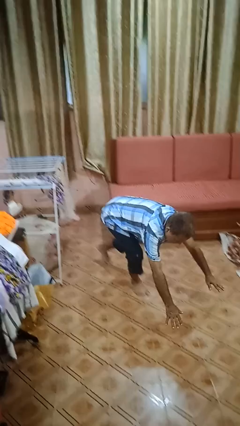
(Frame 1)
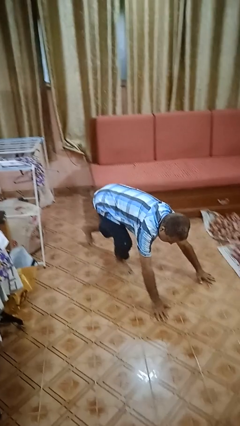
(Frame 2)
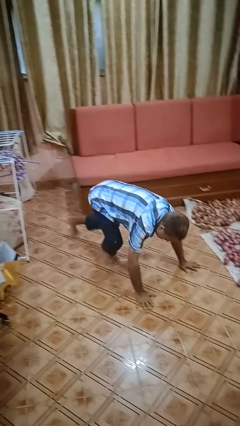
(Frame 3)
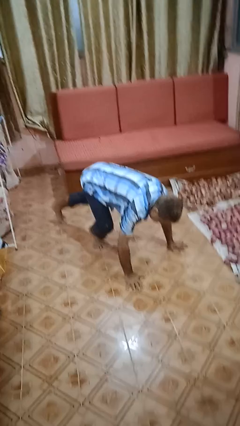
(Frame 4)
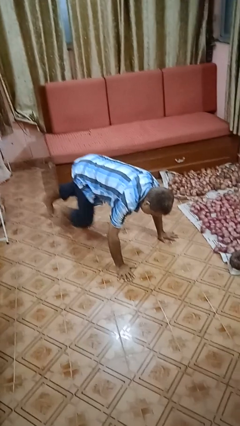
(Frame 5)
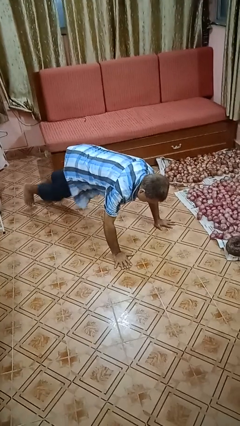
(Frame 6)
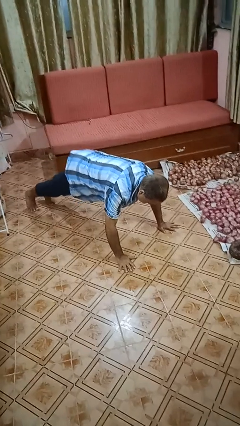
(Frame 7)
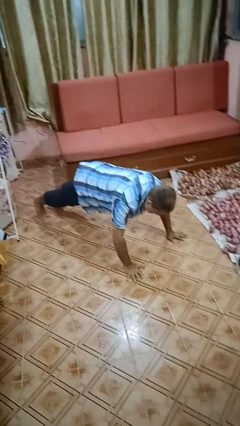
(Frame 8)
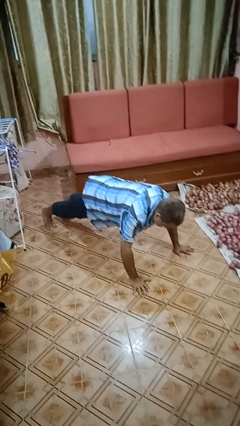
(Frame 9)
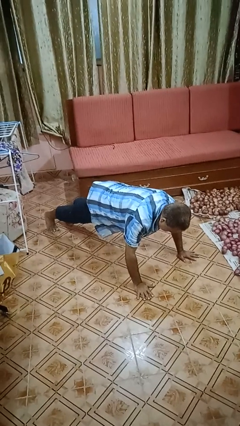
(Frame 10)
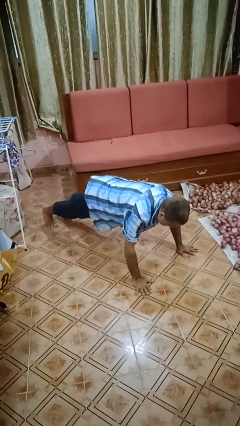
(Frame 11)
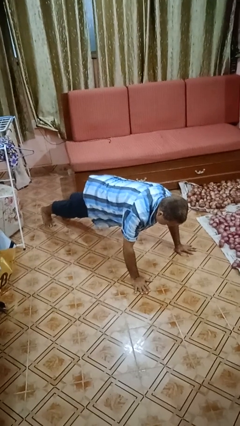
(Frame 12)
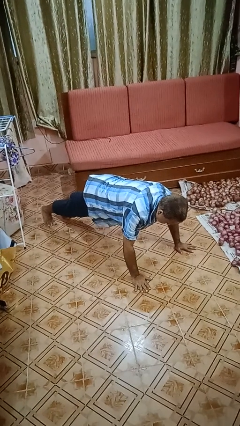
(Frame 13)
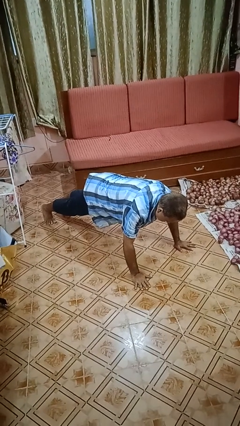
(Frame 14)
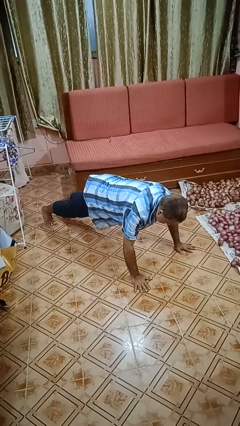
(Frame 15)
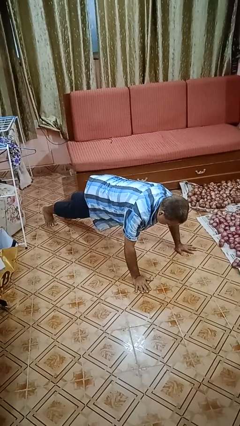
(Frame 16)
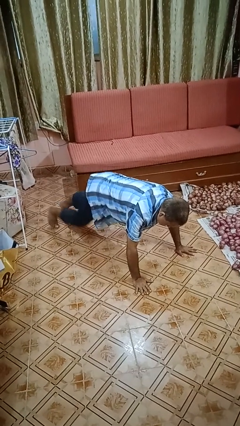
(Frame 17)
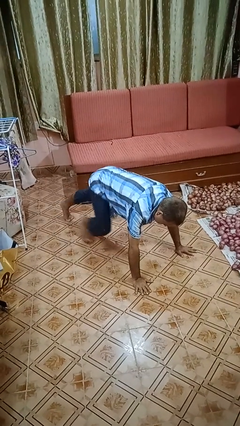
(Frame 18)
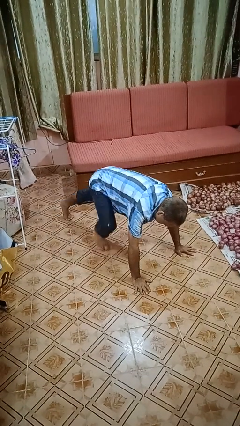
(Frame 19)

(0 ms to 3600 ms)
person exercises with plank

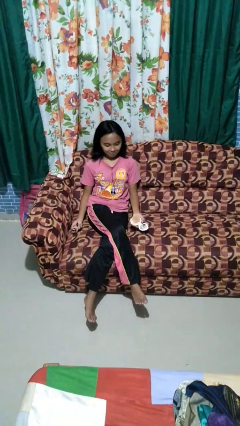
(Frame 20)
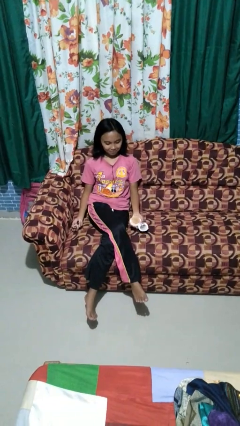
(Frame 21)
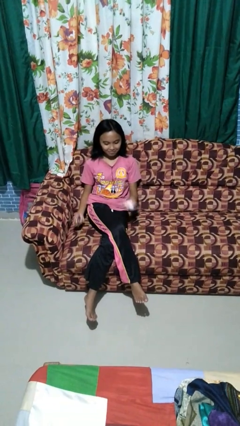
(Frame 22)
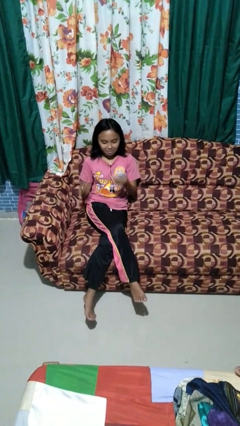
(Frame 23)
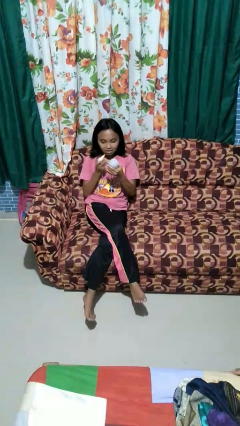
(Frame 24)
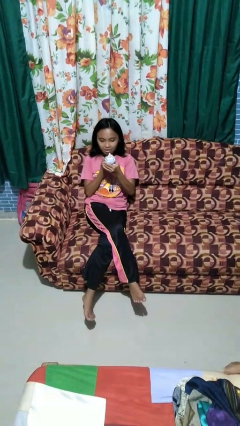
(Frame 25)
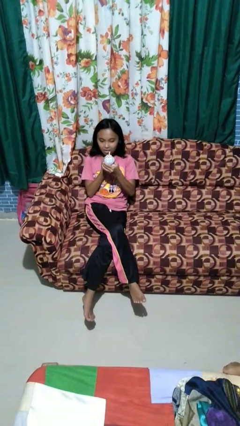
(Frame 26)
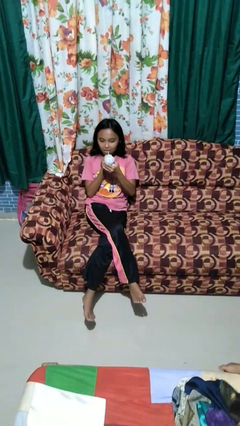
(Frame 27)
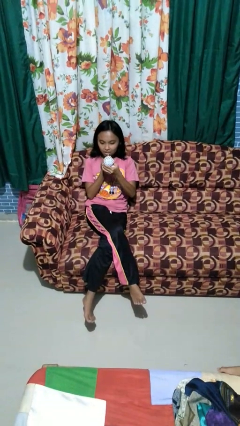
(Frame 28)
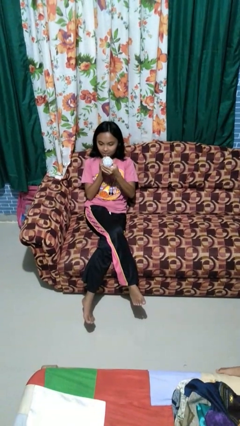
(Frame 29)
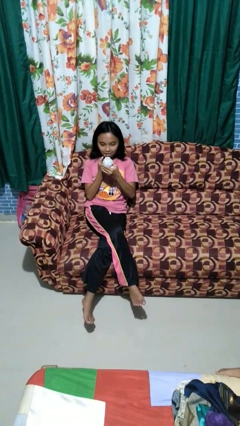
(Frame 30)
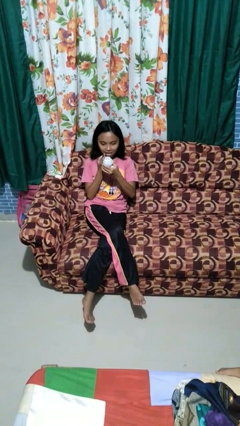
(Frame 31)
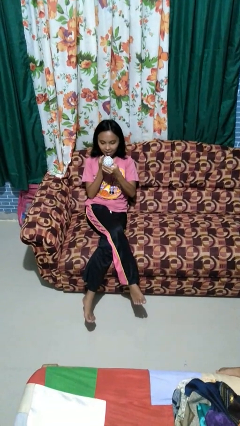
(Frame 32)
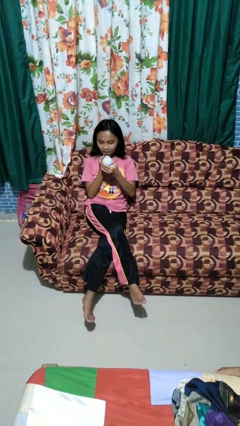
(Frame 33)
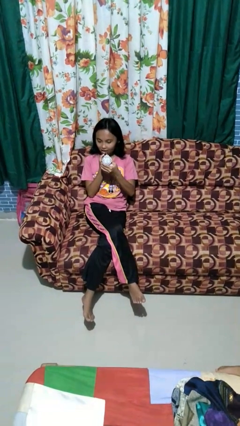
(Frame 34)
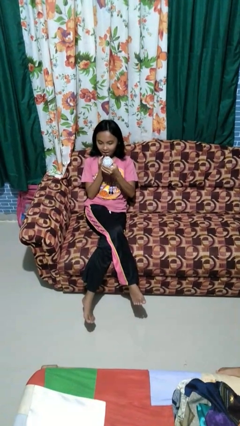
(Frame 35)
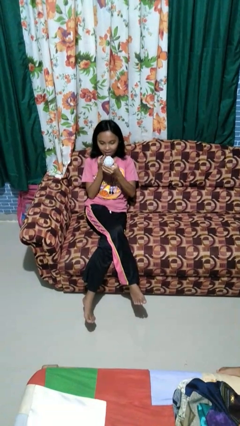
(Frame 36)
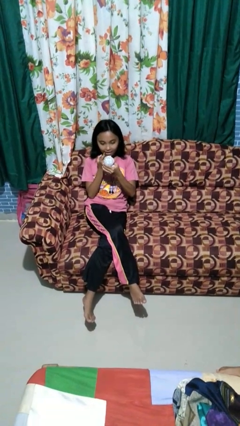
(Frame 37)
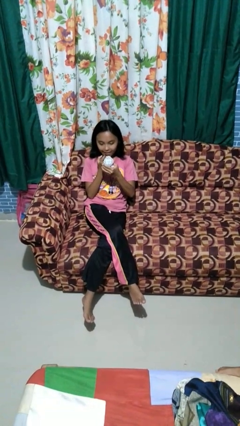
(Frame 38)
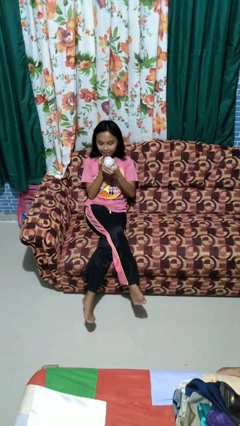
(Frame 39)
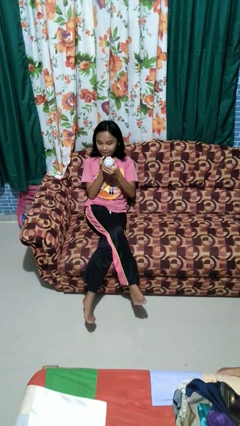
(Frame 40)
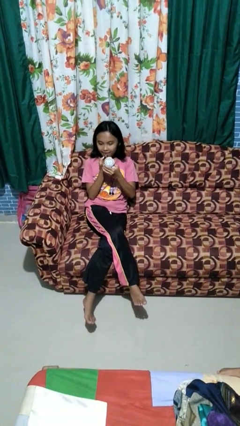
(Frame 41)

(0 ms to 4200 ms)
person applies lip makeup

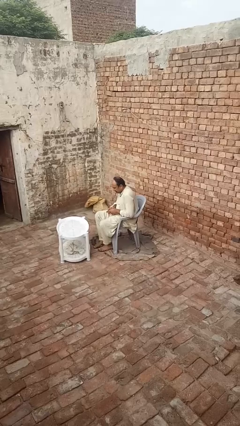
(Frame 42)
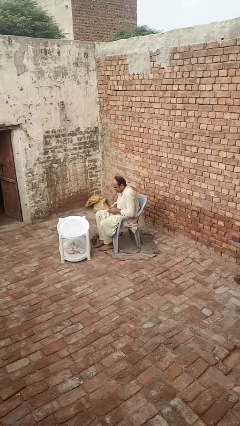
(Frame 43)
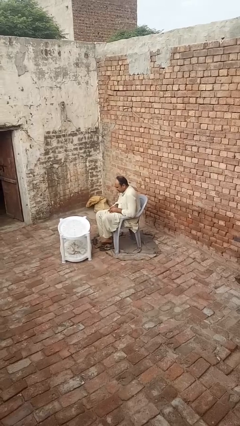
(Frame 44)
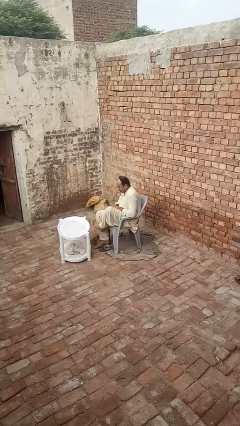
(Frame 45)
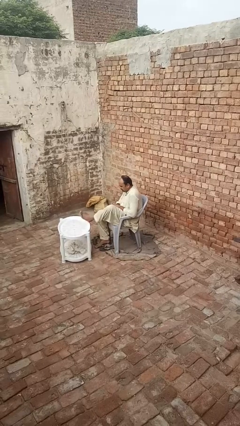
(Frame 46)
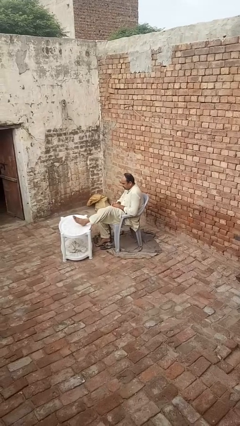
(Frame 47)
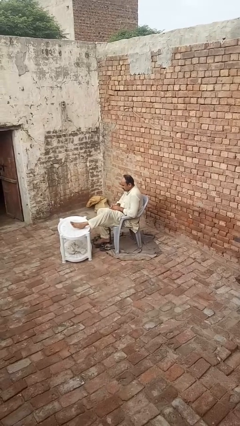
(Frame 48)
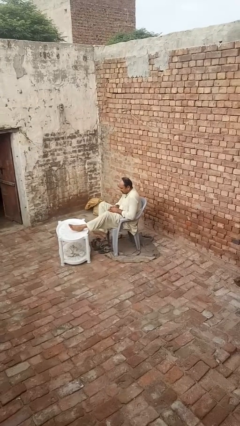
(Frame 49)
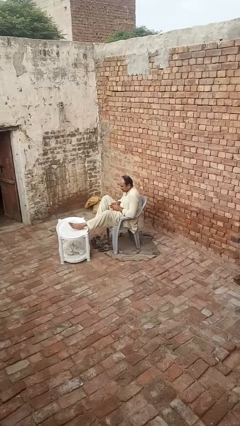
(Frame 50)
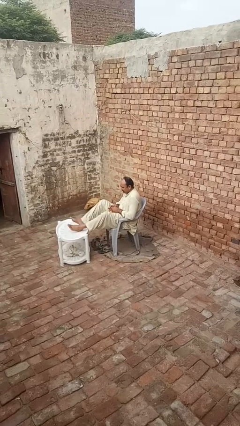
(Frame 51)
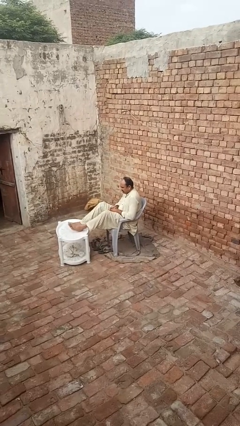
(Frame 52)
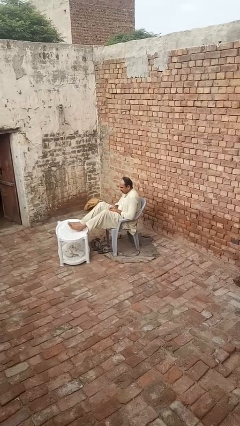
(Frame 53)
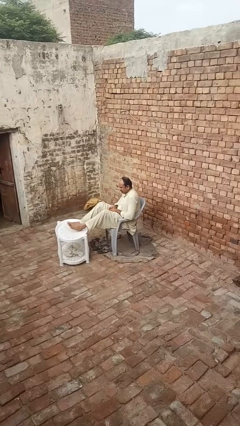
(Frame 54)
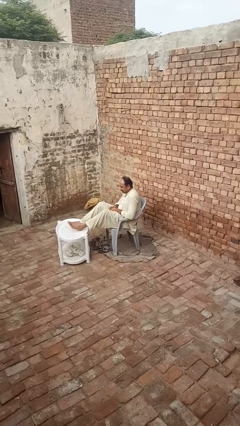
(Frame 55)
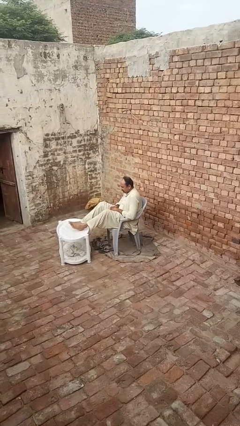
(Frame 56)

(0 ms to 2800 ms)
person puts feet up

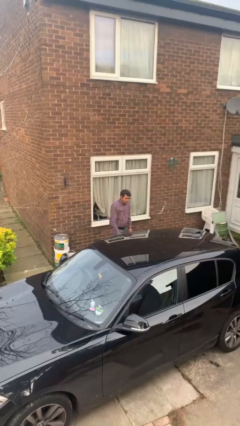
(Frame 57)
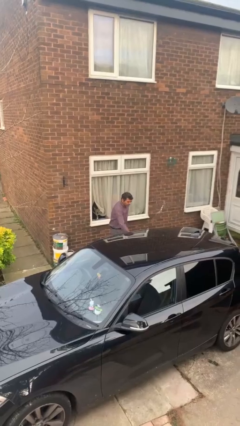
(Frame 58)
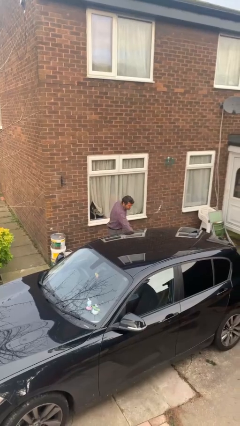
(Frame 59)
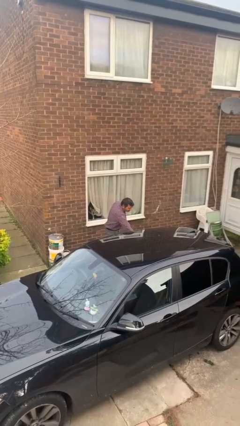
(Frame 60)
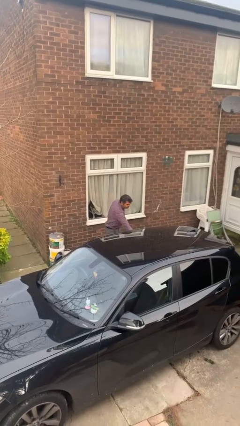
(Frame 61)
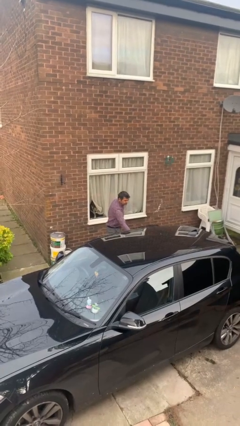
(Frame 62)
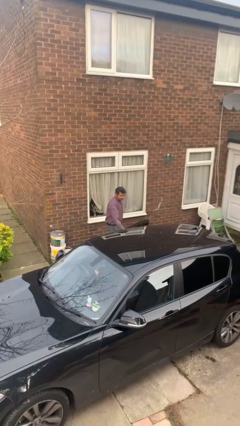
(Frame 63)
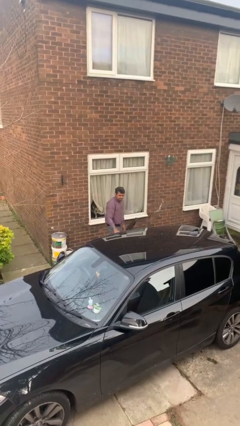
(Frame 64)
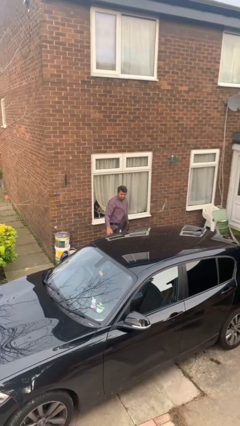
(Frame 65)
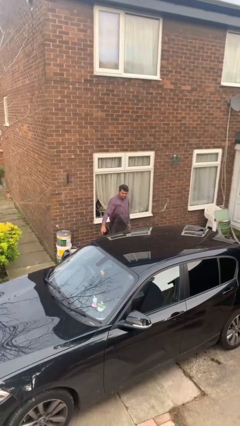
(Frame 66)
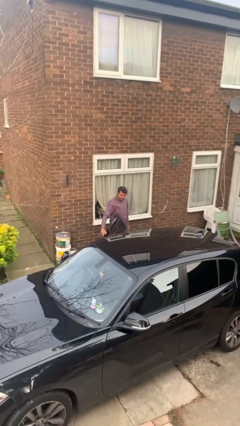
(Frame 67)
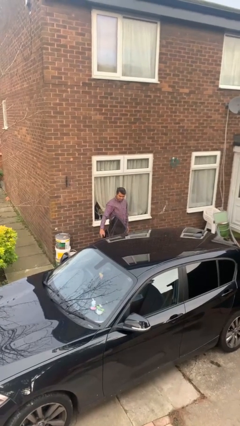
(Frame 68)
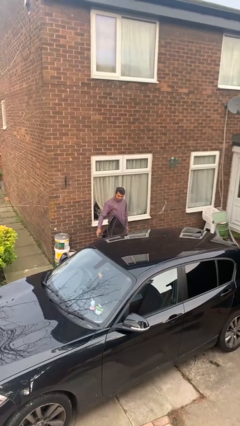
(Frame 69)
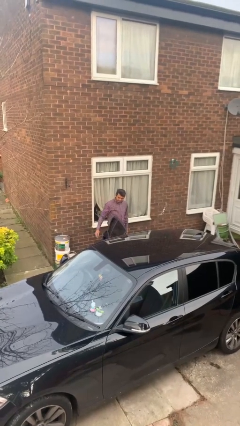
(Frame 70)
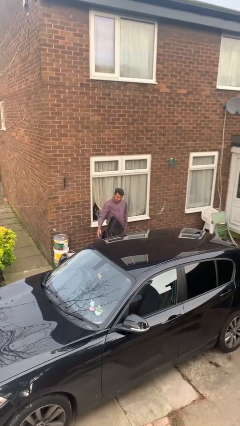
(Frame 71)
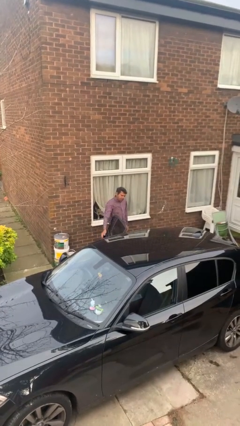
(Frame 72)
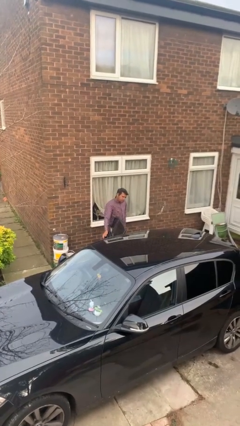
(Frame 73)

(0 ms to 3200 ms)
person opens car door

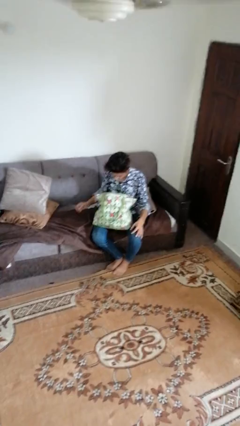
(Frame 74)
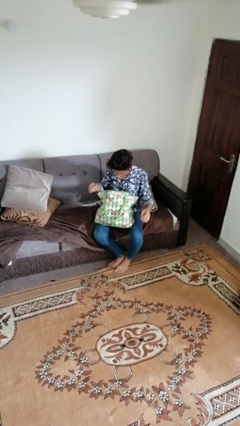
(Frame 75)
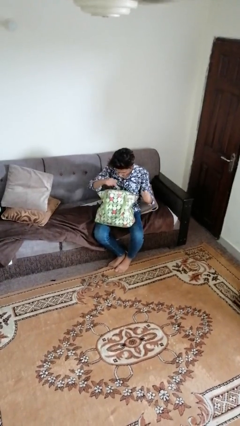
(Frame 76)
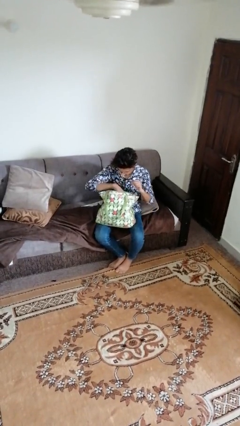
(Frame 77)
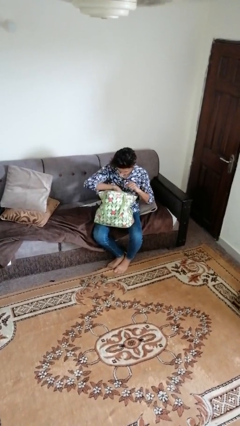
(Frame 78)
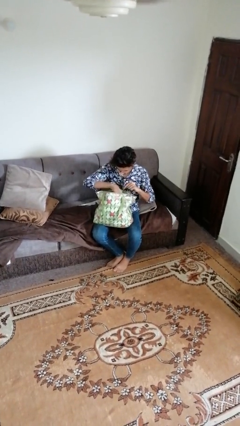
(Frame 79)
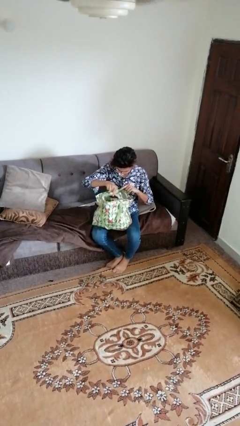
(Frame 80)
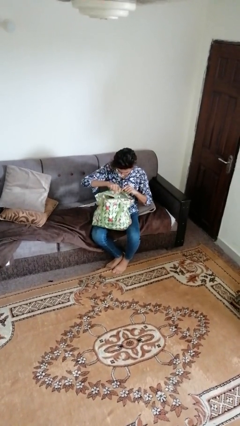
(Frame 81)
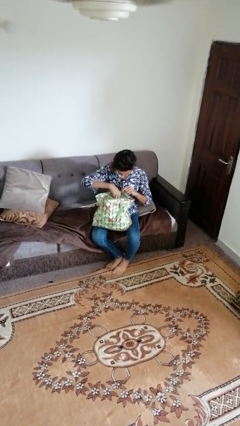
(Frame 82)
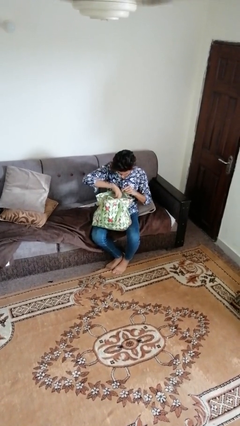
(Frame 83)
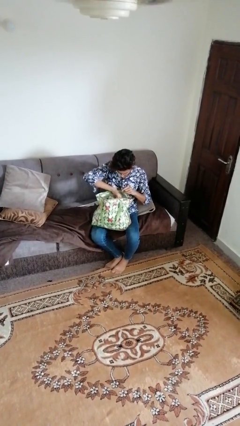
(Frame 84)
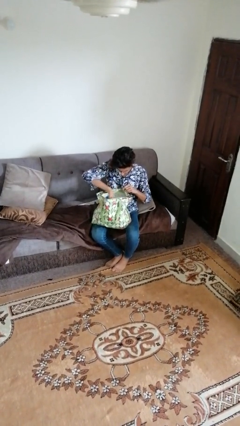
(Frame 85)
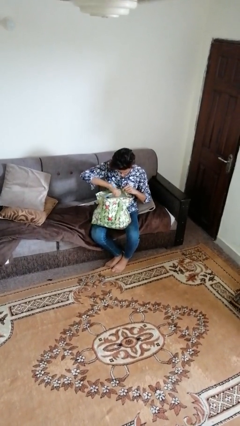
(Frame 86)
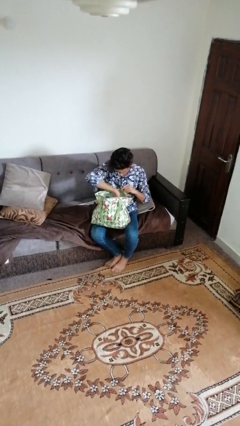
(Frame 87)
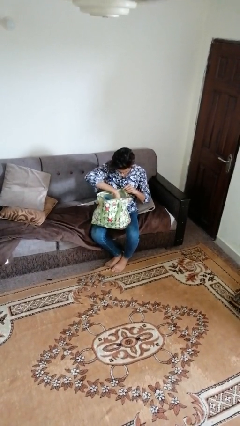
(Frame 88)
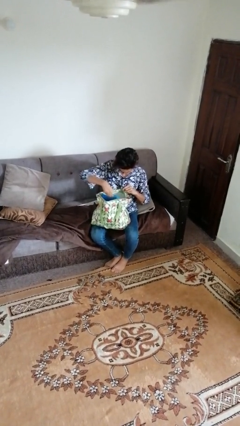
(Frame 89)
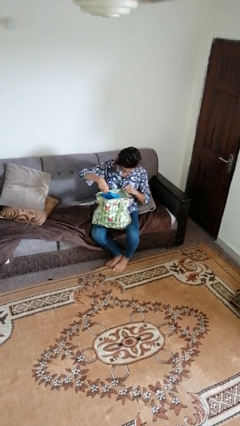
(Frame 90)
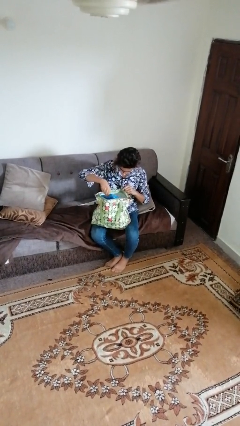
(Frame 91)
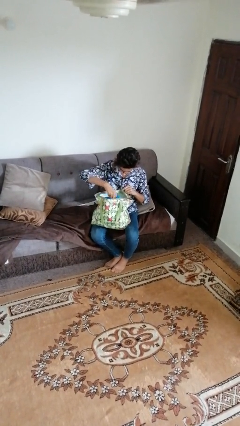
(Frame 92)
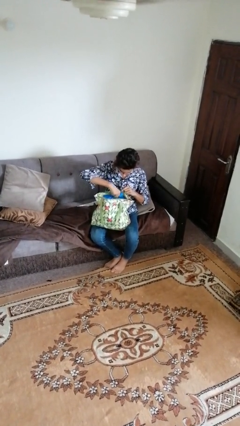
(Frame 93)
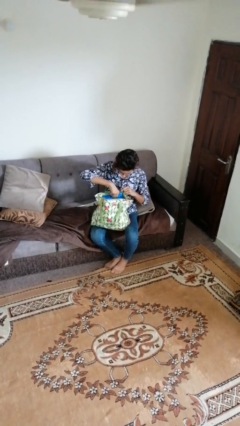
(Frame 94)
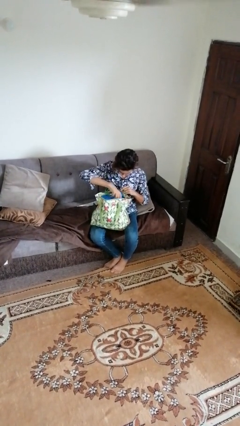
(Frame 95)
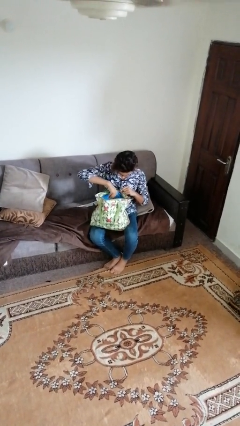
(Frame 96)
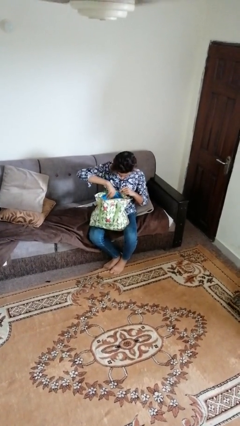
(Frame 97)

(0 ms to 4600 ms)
person searches in bag
